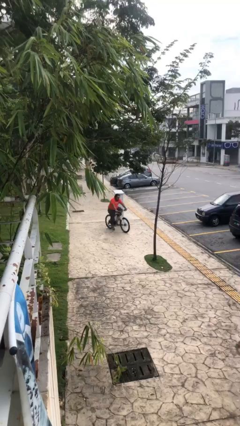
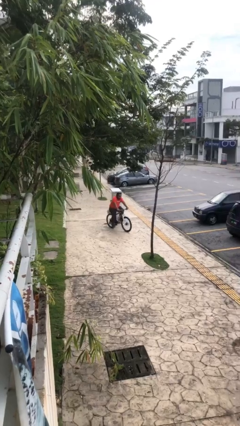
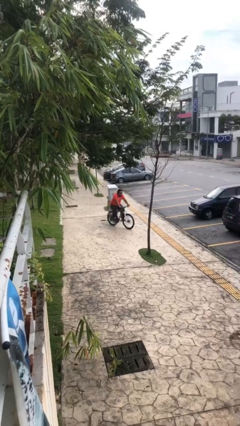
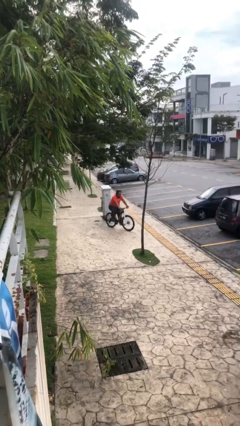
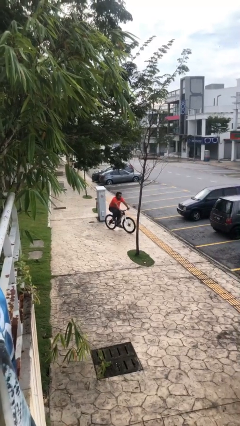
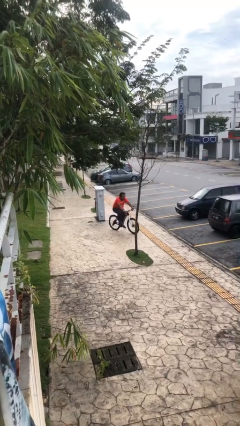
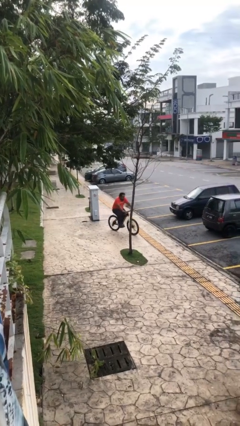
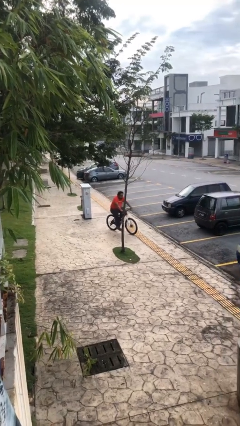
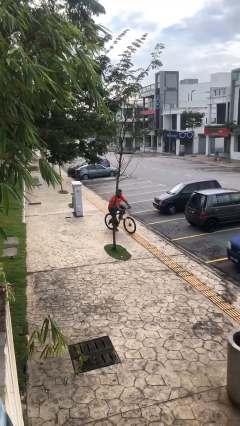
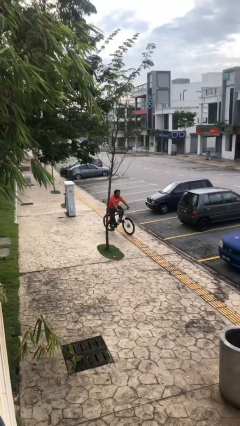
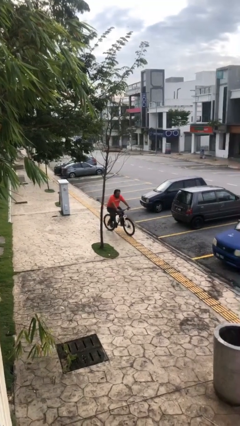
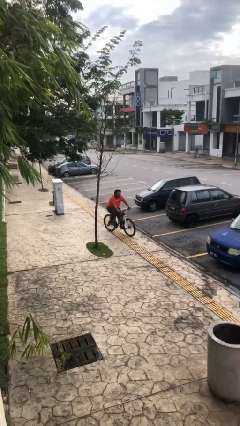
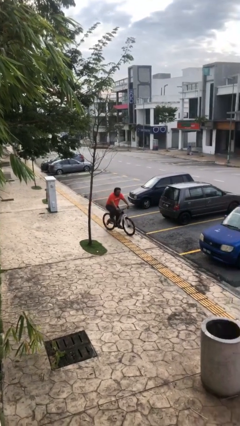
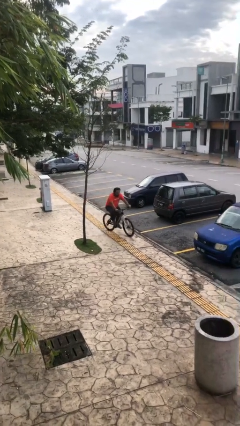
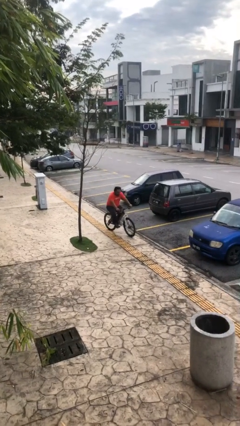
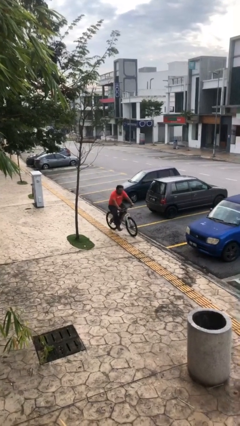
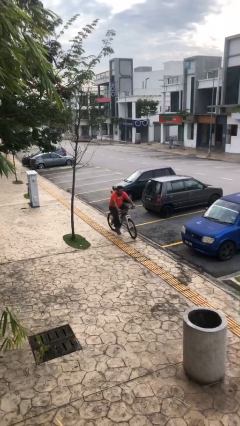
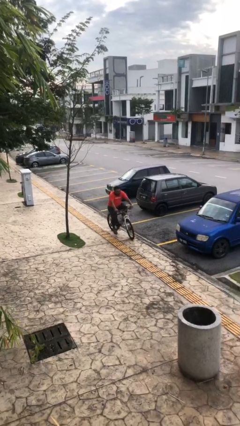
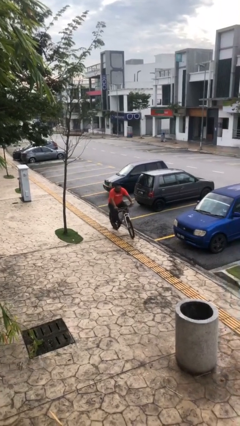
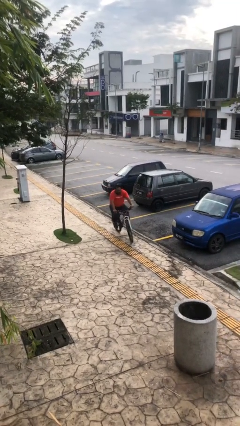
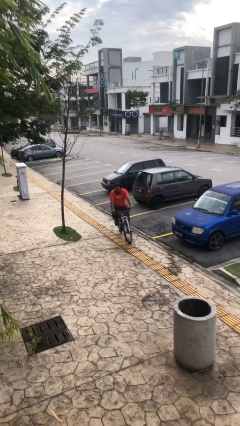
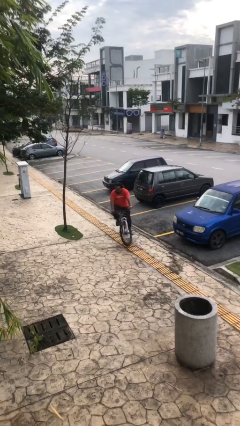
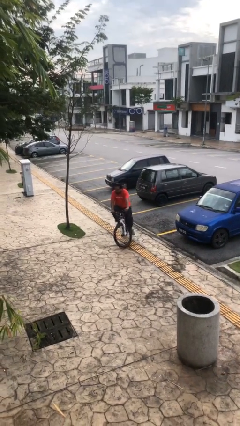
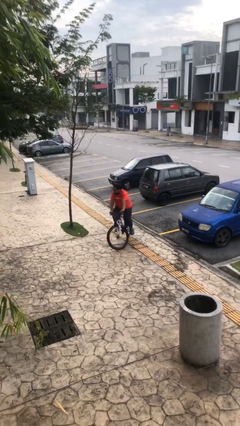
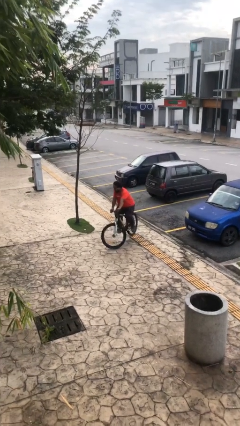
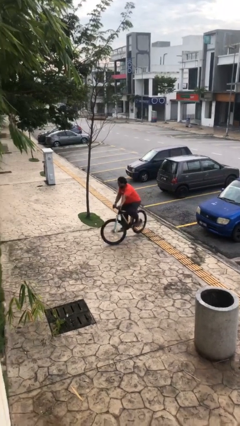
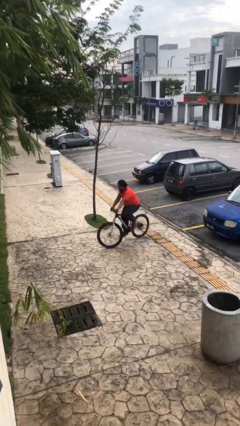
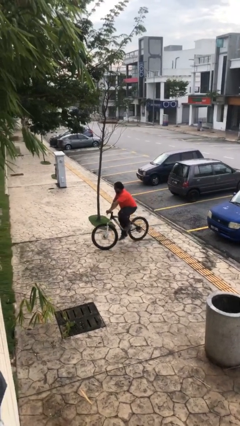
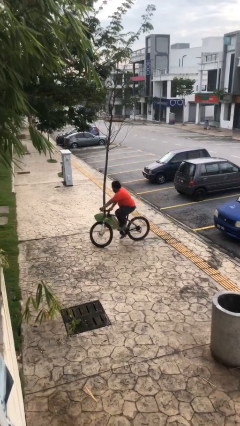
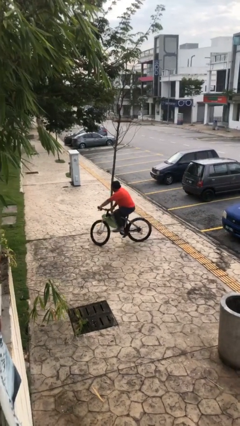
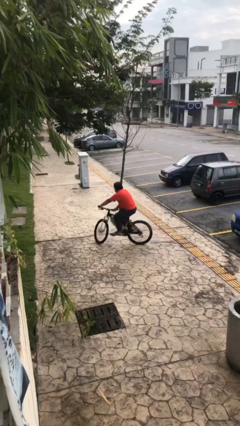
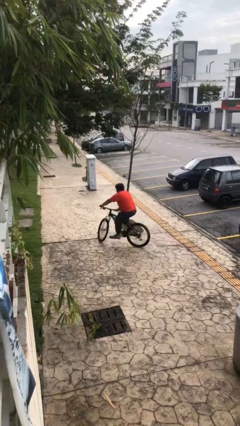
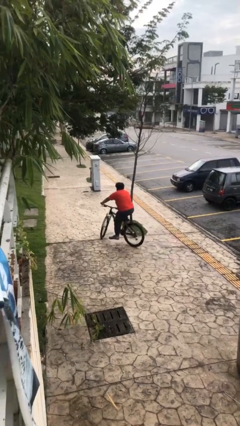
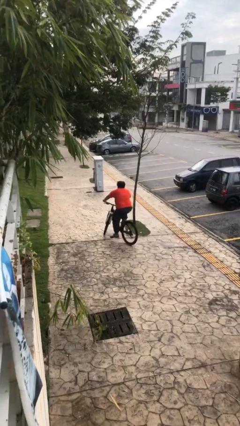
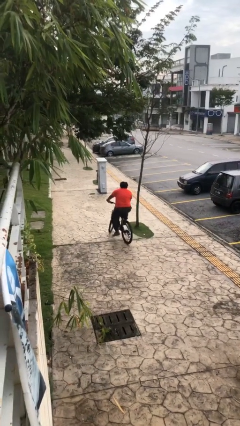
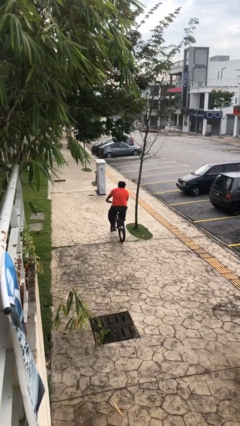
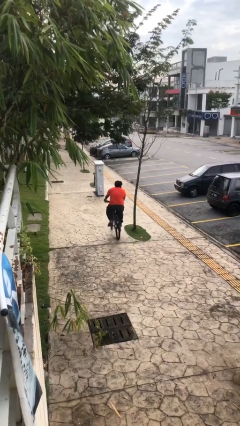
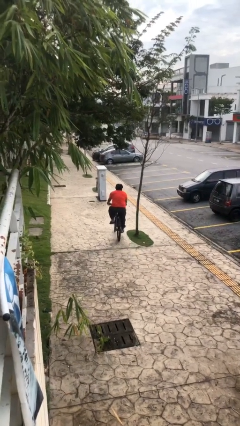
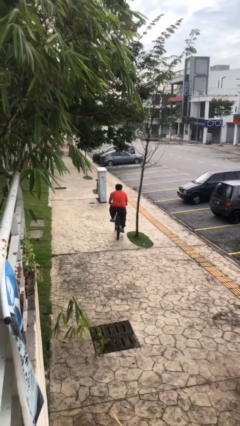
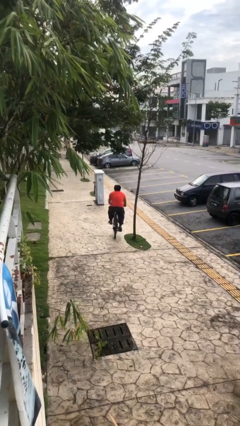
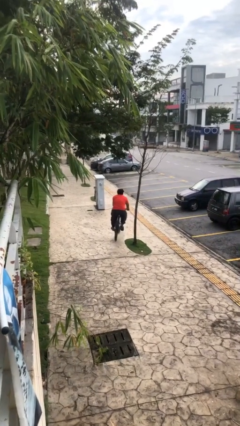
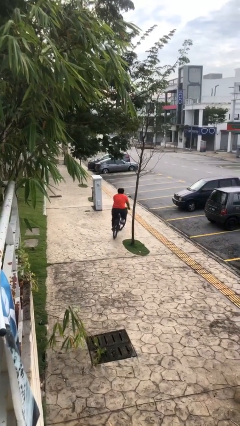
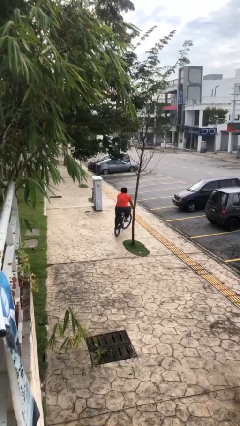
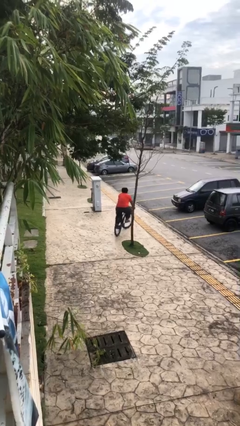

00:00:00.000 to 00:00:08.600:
person rides bicycle

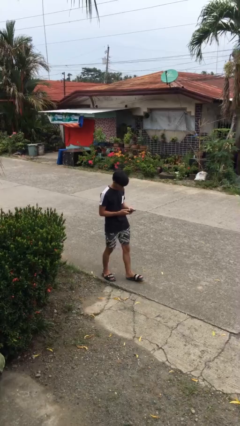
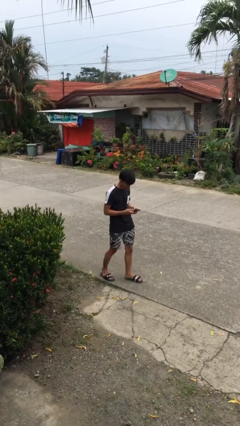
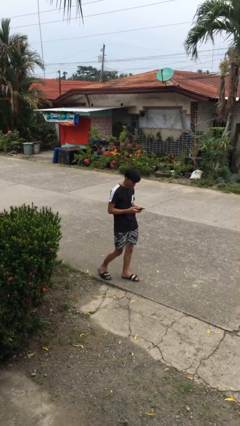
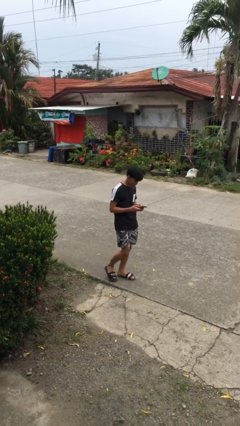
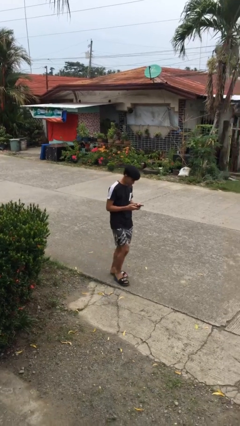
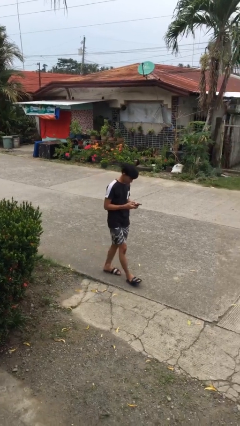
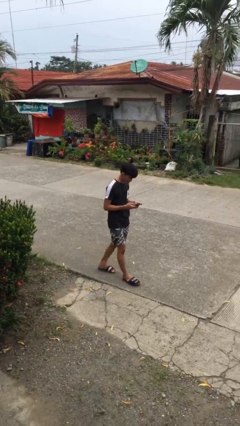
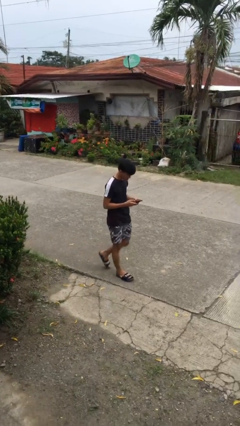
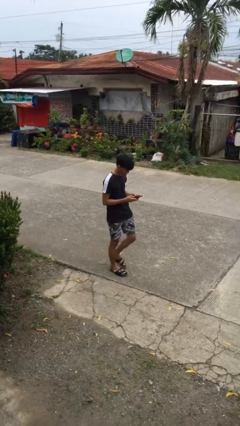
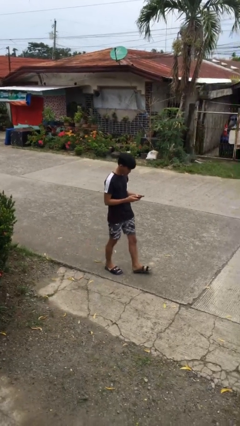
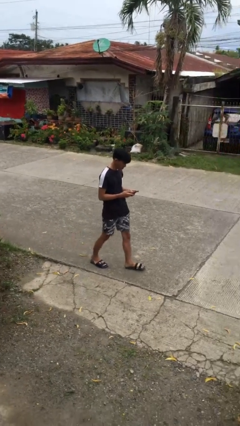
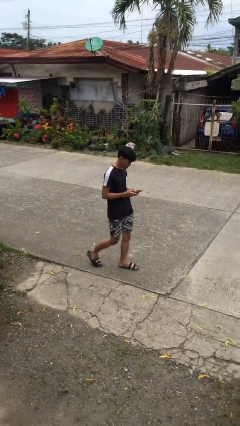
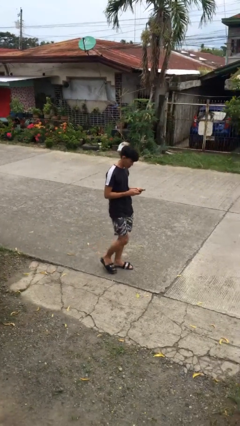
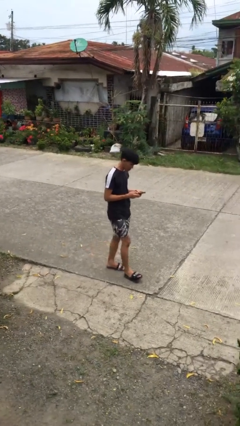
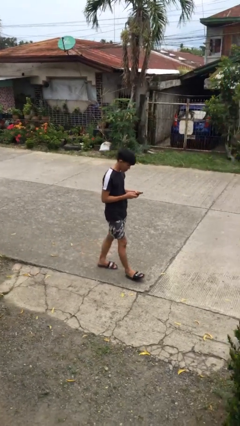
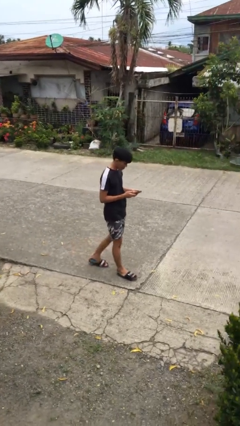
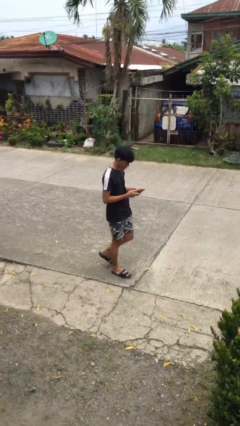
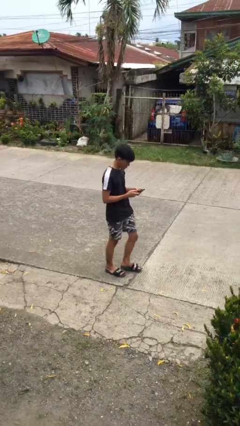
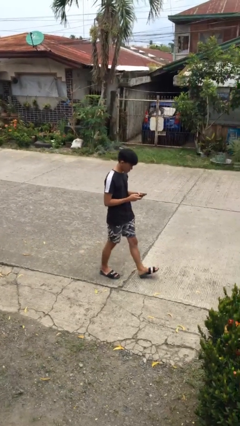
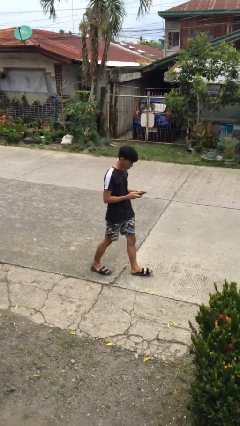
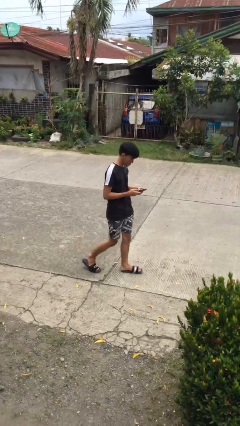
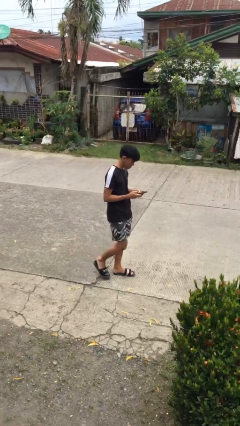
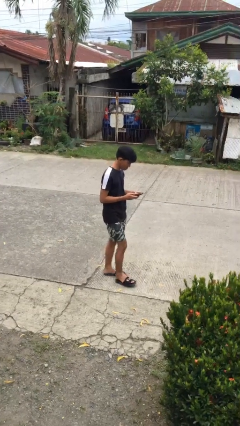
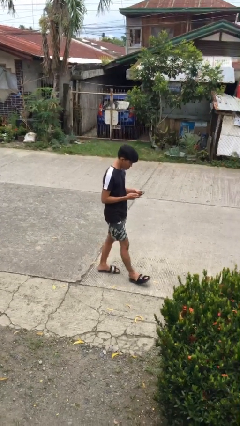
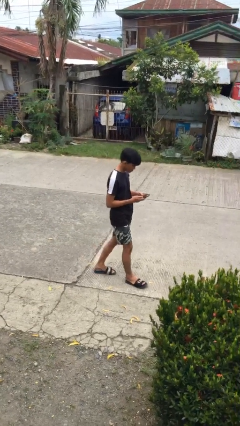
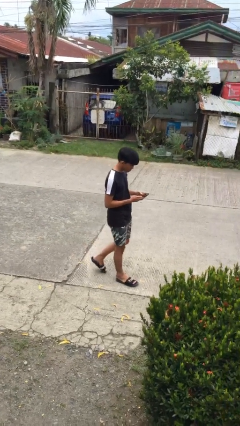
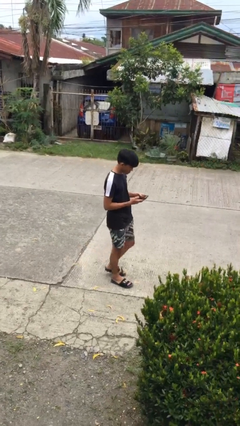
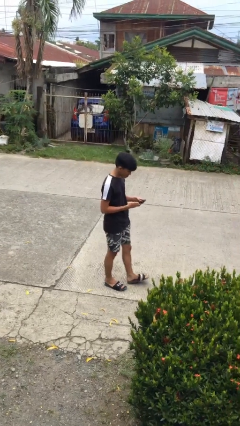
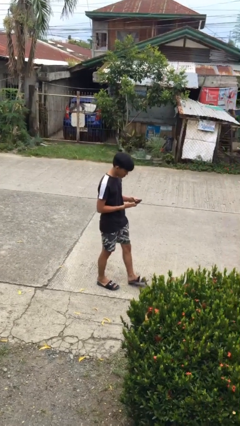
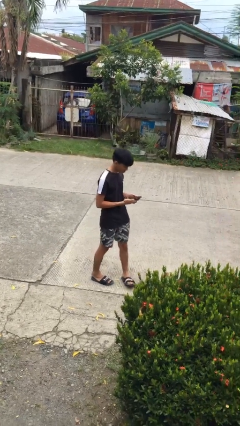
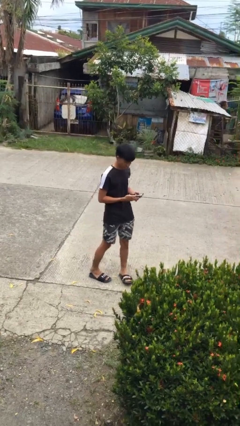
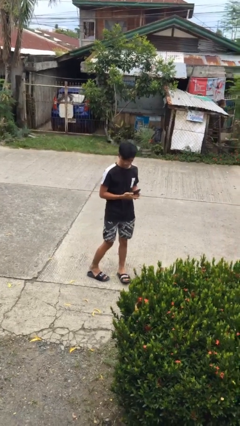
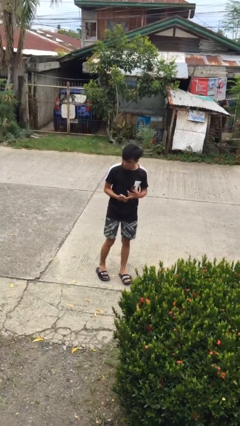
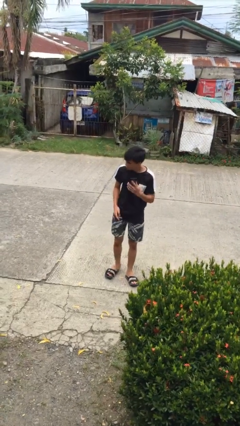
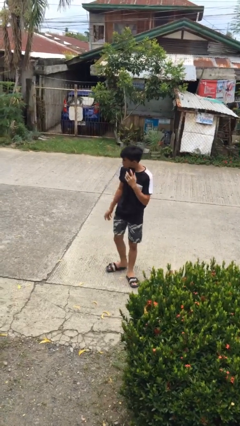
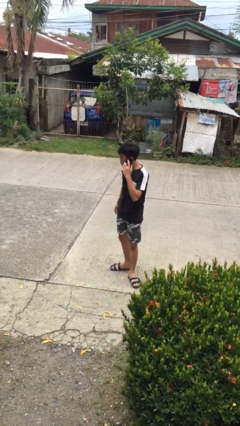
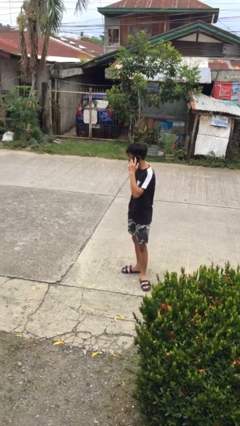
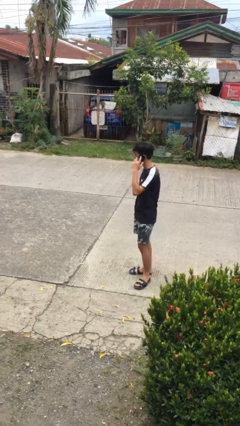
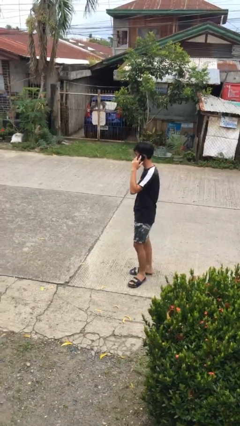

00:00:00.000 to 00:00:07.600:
person texts on phone

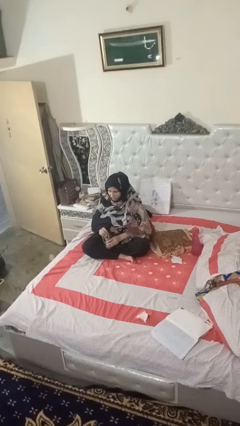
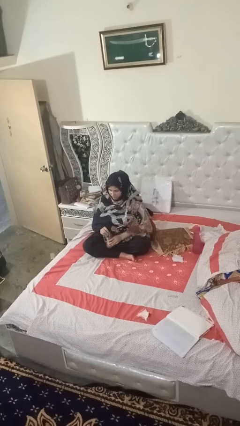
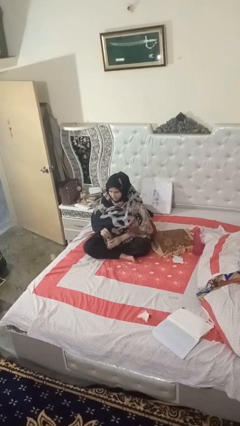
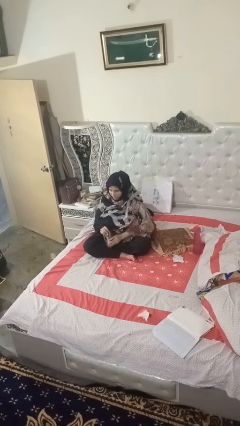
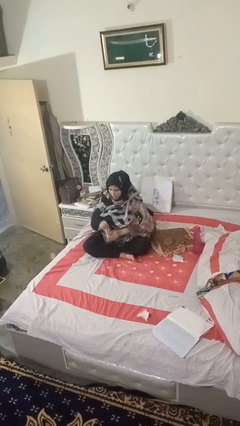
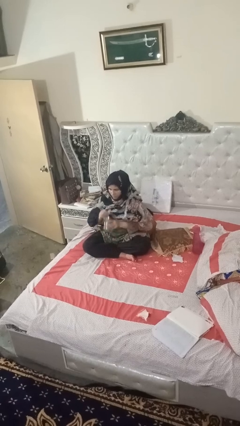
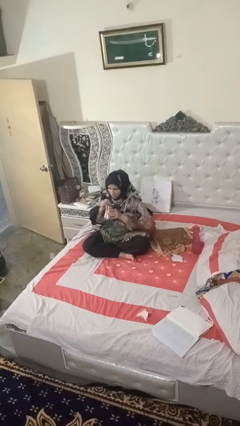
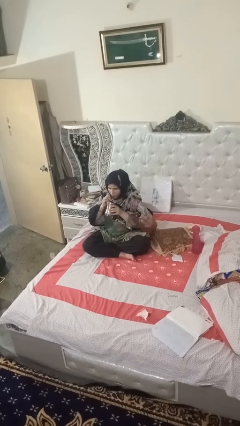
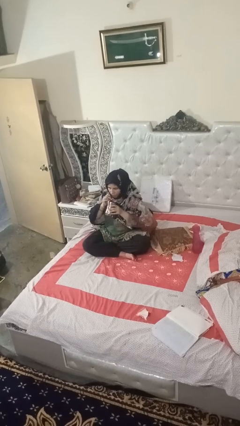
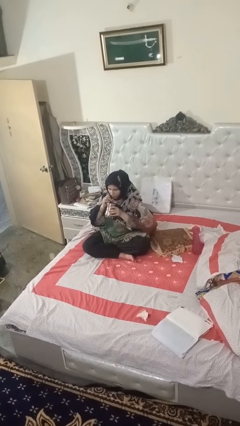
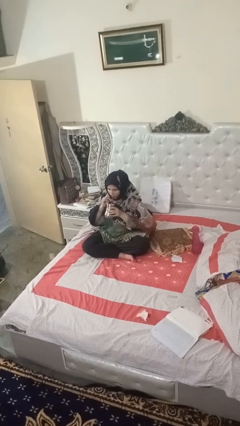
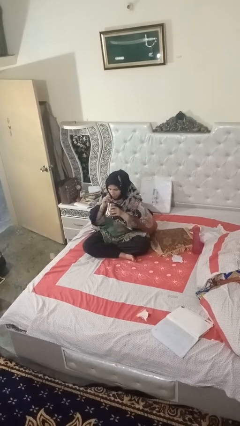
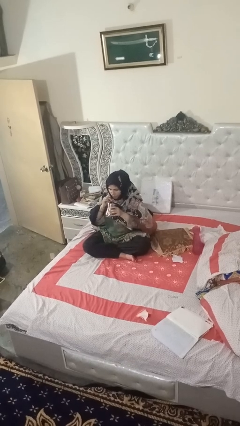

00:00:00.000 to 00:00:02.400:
person drinks from straw
